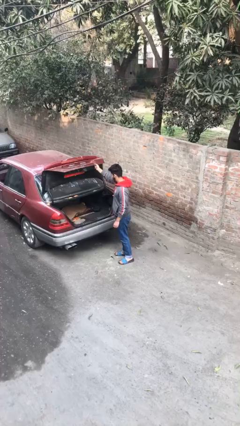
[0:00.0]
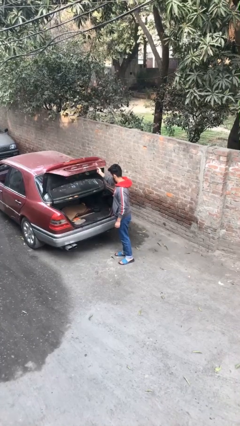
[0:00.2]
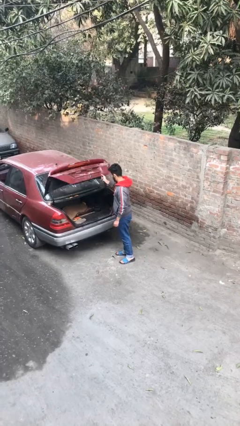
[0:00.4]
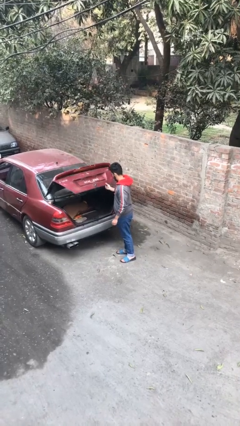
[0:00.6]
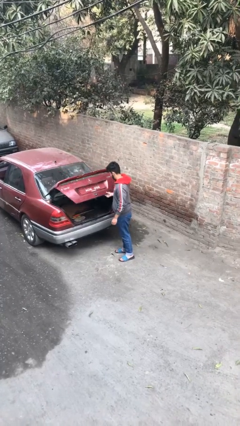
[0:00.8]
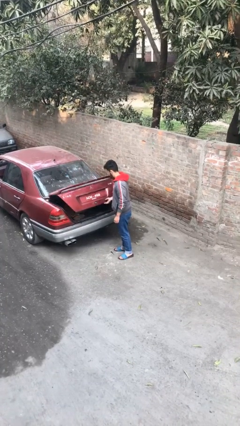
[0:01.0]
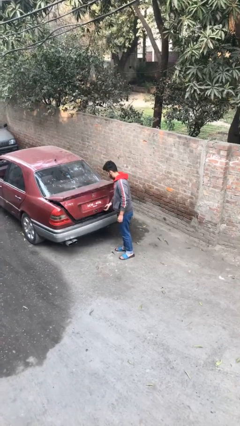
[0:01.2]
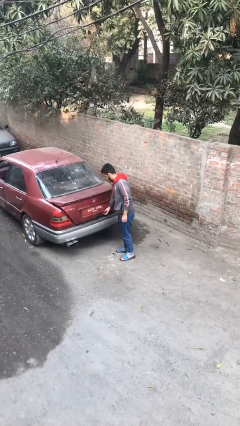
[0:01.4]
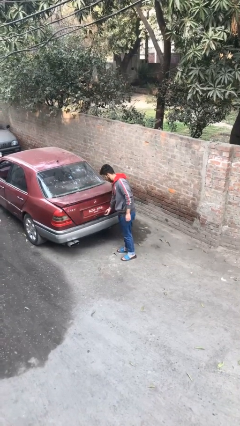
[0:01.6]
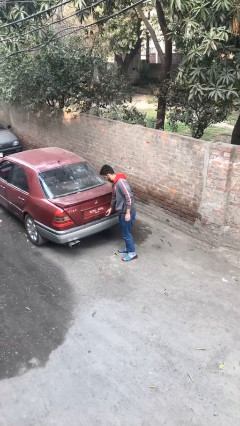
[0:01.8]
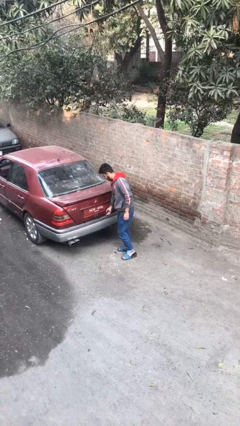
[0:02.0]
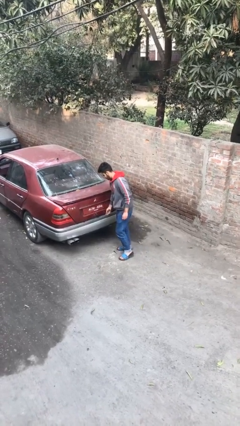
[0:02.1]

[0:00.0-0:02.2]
person closes car trunk

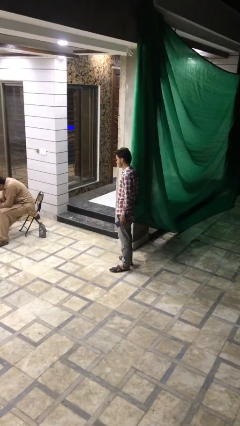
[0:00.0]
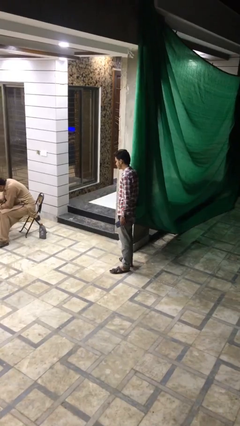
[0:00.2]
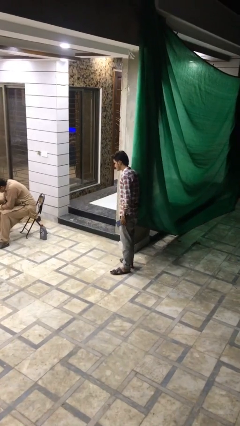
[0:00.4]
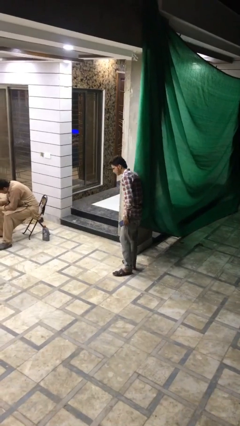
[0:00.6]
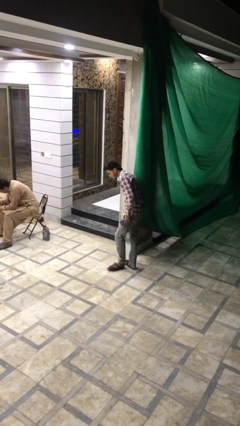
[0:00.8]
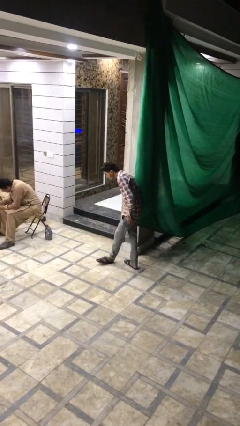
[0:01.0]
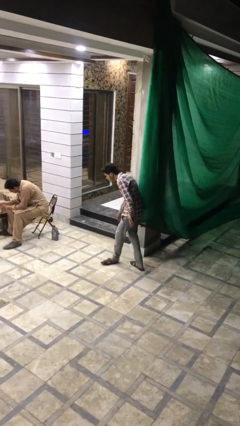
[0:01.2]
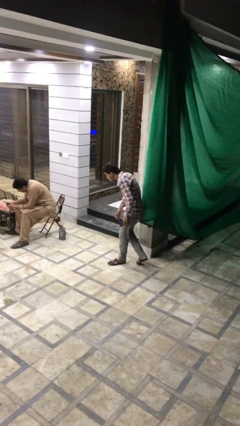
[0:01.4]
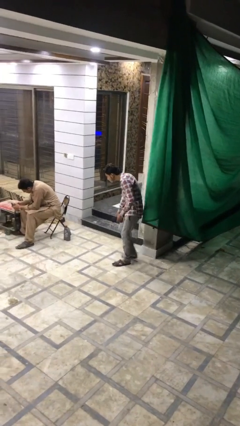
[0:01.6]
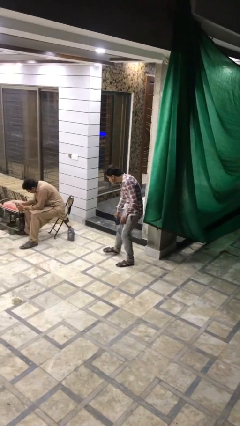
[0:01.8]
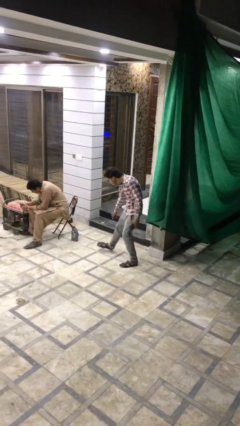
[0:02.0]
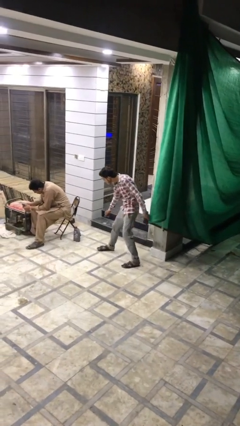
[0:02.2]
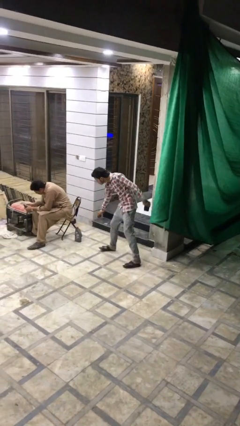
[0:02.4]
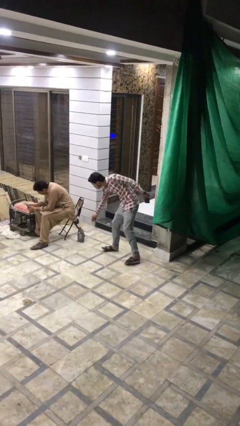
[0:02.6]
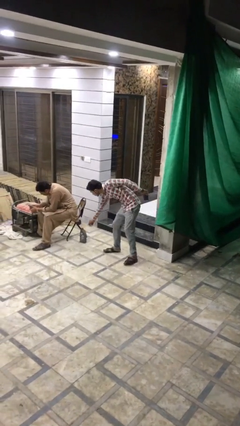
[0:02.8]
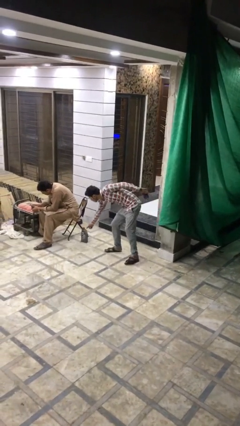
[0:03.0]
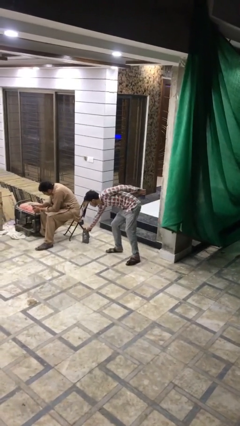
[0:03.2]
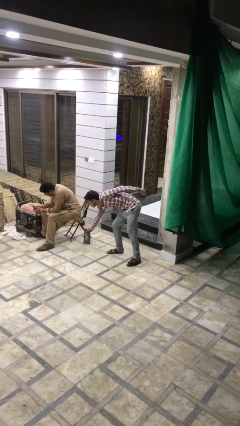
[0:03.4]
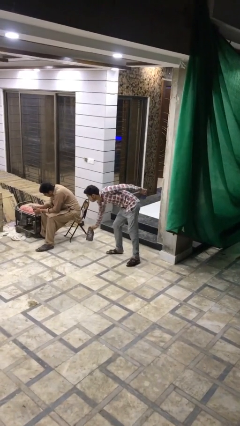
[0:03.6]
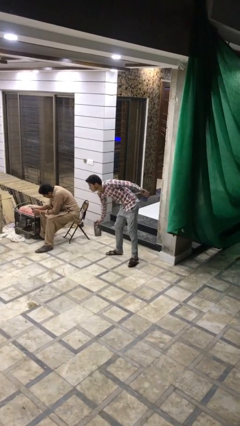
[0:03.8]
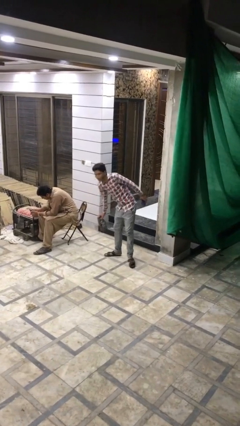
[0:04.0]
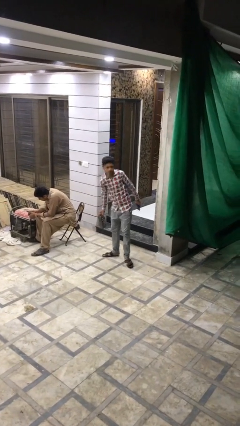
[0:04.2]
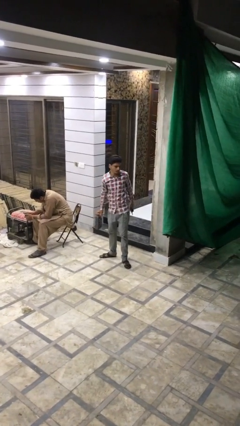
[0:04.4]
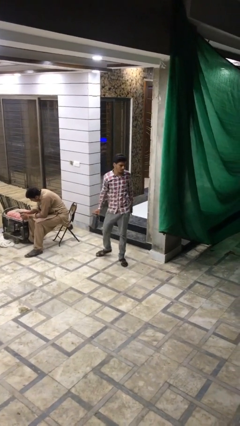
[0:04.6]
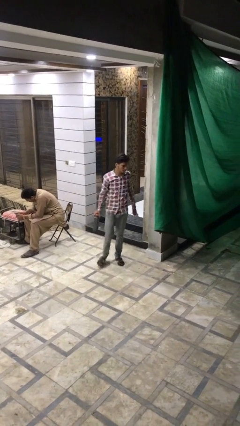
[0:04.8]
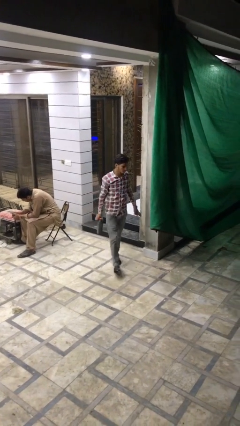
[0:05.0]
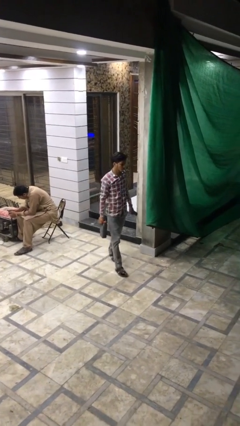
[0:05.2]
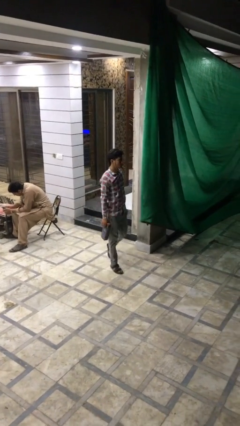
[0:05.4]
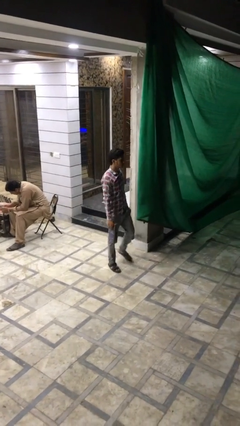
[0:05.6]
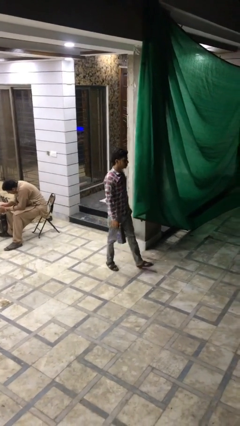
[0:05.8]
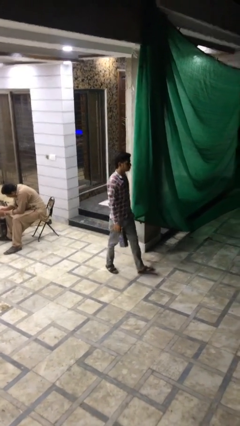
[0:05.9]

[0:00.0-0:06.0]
person steals object from person

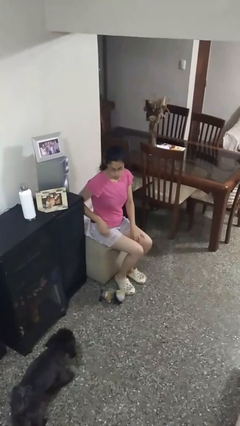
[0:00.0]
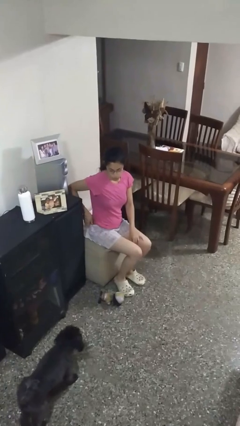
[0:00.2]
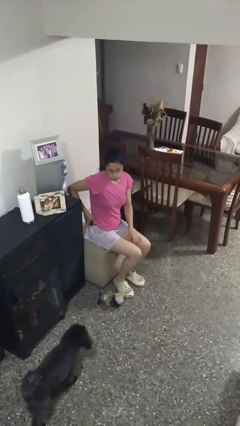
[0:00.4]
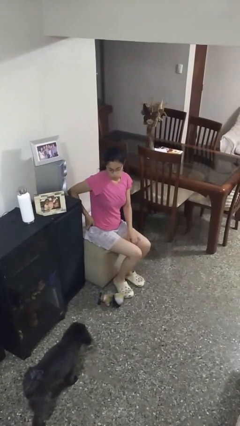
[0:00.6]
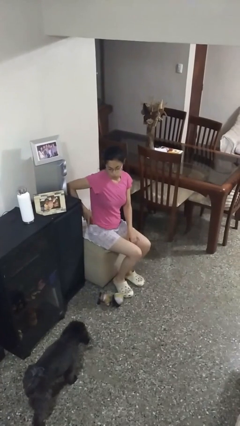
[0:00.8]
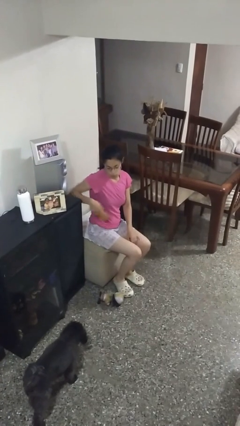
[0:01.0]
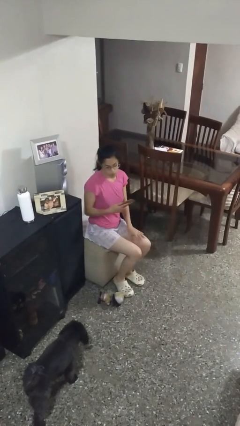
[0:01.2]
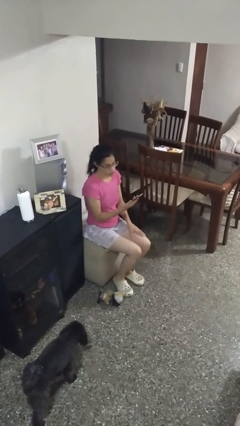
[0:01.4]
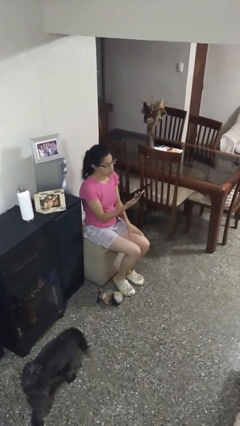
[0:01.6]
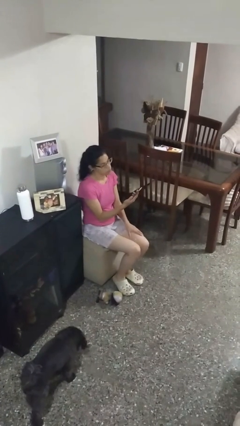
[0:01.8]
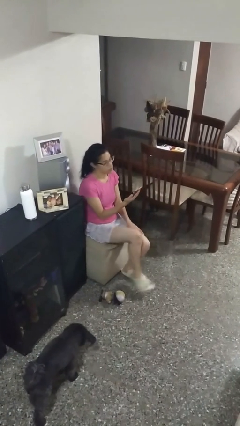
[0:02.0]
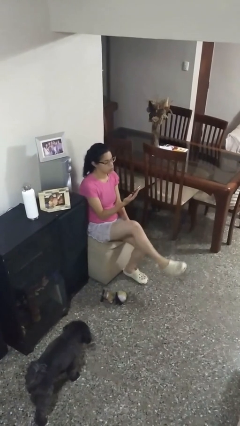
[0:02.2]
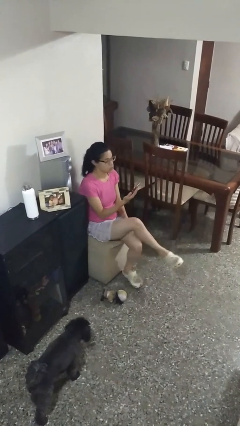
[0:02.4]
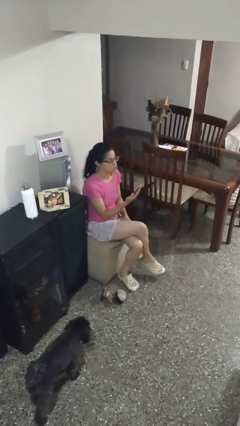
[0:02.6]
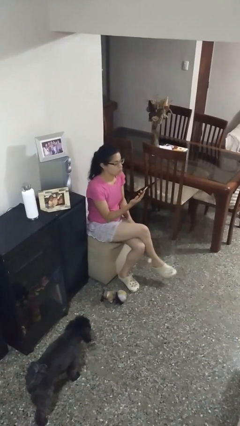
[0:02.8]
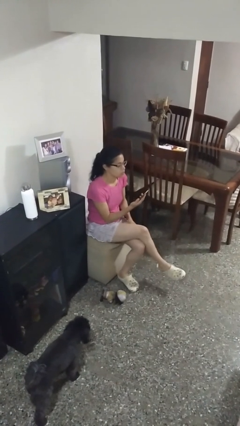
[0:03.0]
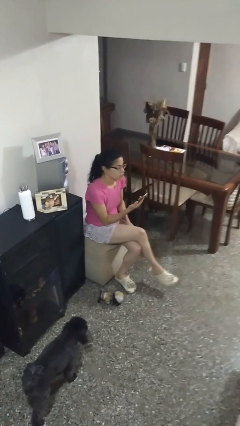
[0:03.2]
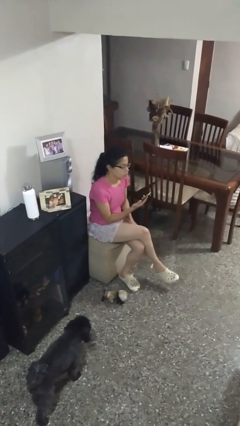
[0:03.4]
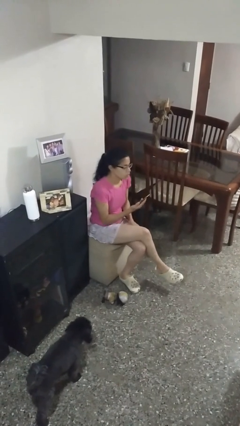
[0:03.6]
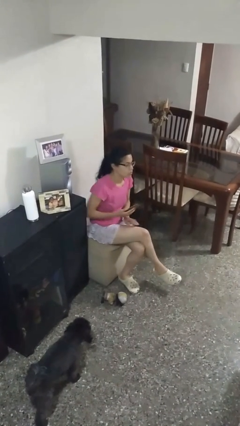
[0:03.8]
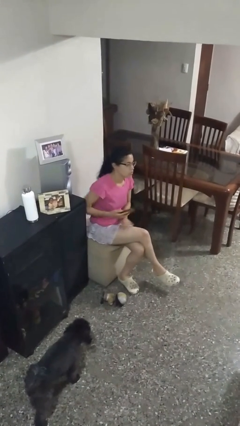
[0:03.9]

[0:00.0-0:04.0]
person takes phone from pocket

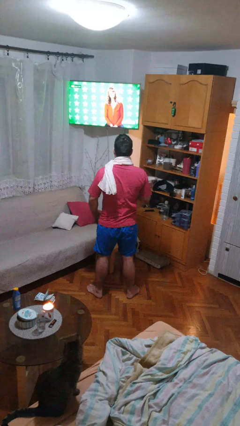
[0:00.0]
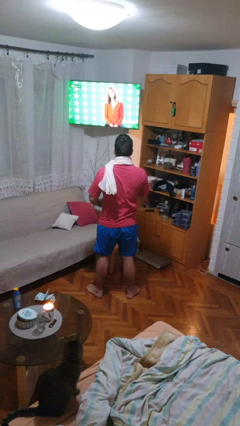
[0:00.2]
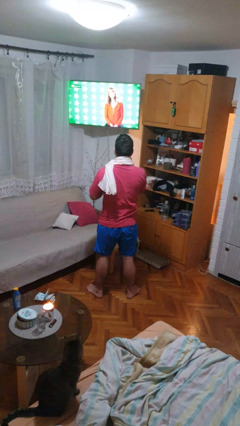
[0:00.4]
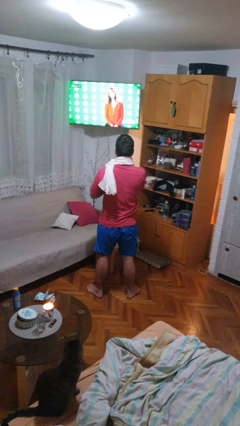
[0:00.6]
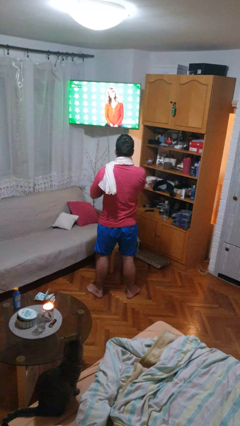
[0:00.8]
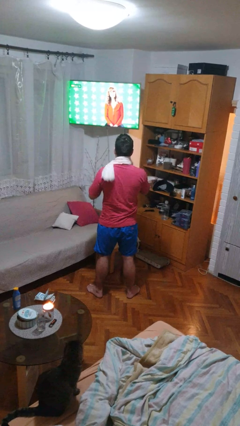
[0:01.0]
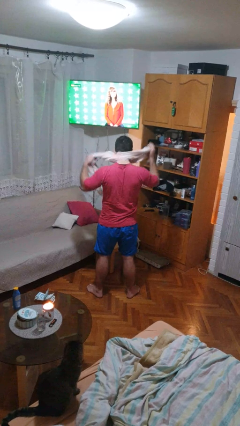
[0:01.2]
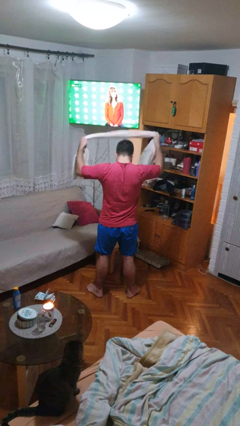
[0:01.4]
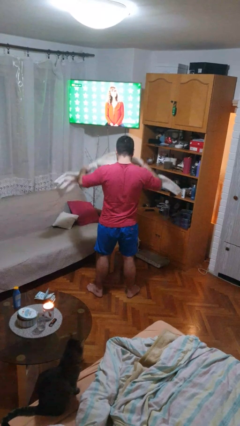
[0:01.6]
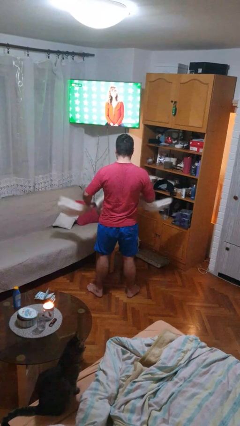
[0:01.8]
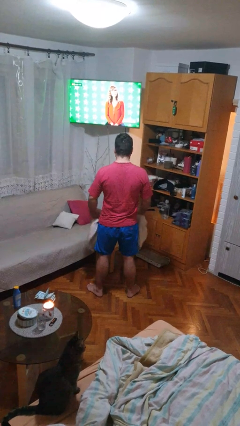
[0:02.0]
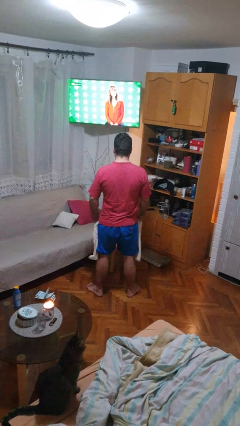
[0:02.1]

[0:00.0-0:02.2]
person takes off scarf

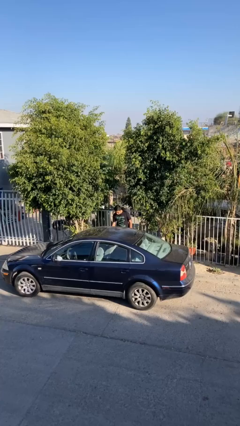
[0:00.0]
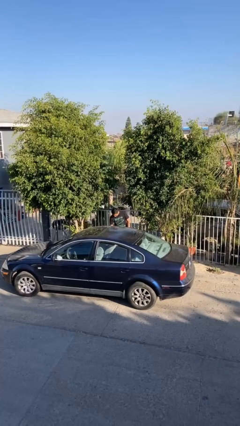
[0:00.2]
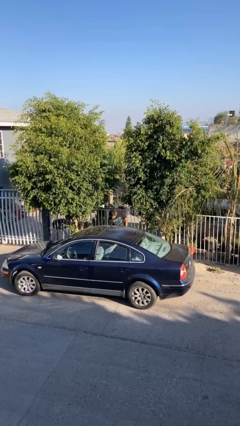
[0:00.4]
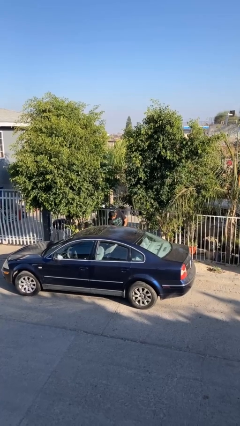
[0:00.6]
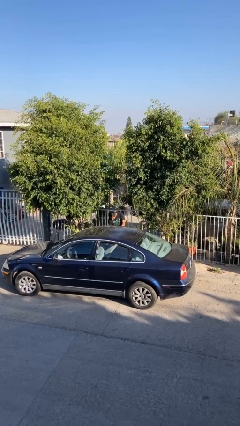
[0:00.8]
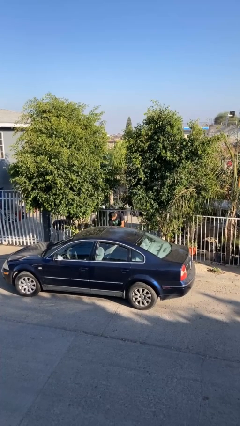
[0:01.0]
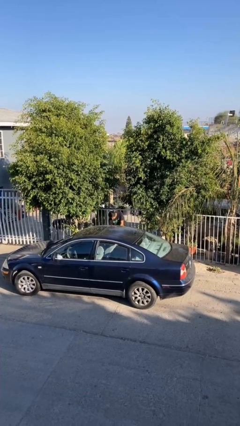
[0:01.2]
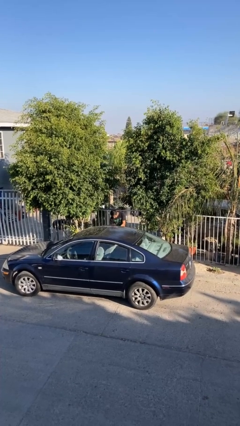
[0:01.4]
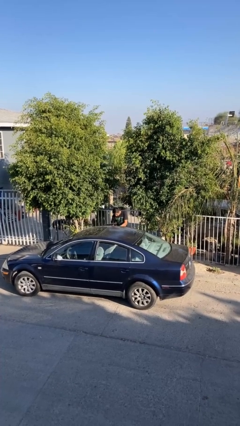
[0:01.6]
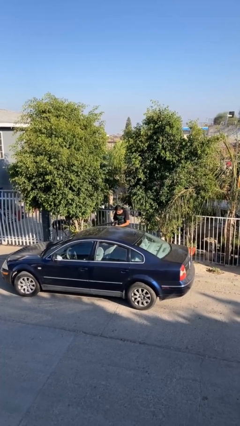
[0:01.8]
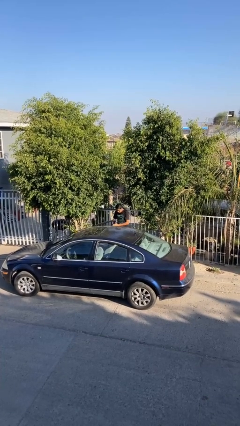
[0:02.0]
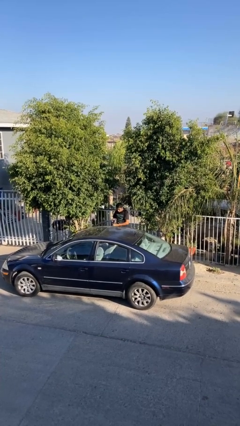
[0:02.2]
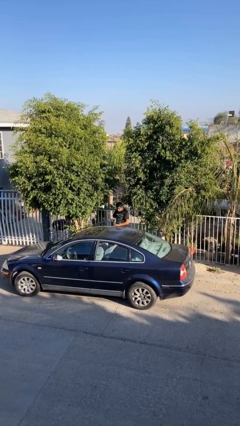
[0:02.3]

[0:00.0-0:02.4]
person closes car door

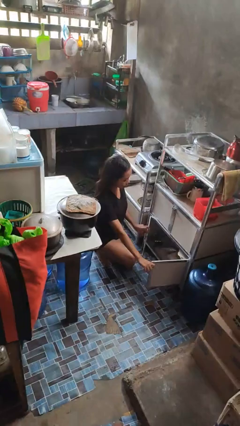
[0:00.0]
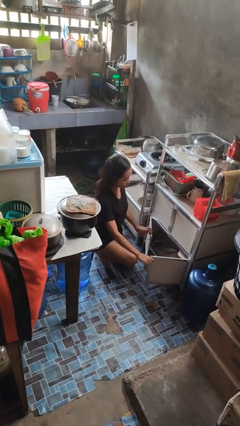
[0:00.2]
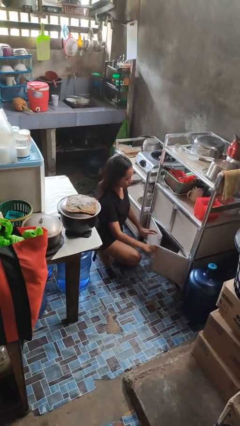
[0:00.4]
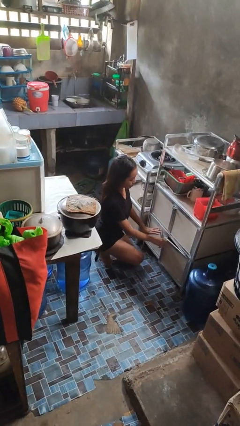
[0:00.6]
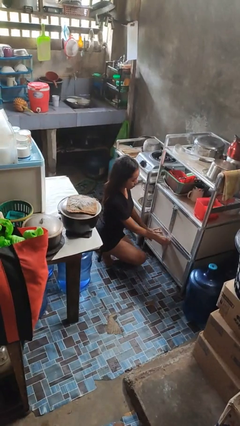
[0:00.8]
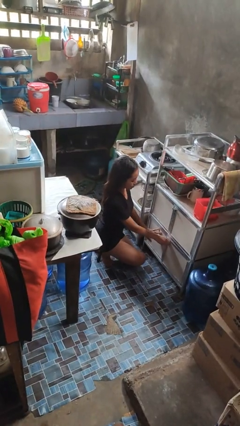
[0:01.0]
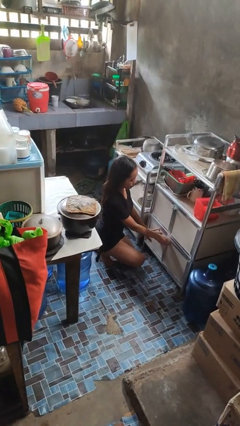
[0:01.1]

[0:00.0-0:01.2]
person closes cabinet
